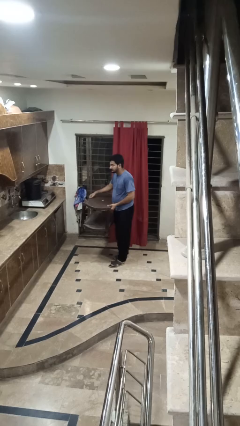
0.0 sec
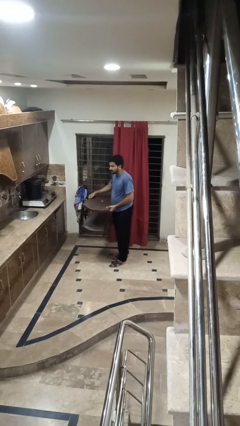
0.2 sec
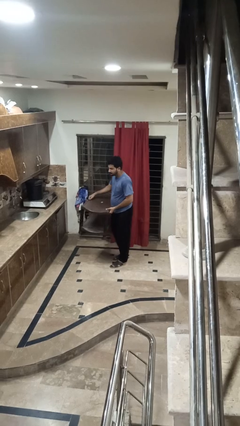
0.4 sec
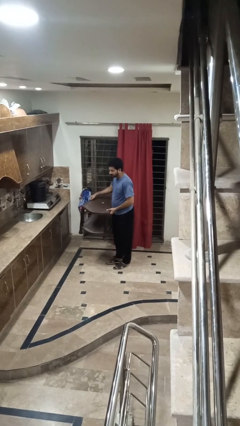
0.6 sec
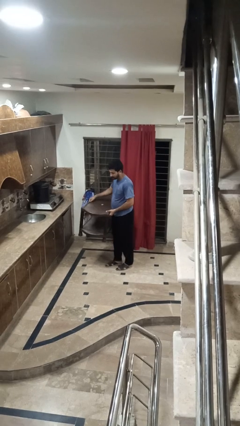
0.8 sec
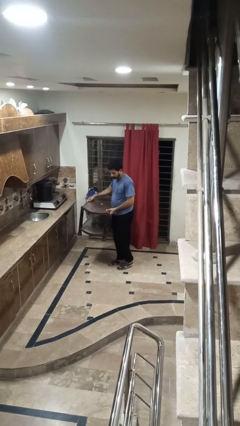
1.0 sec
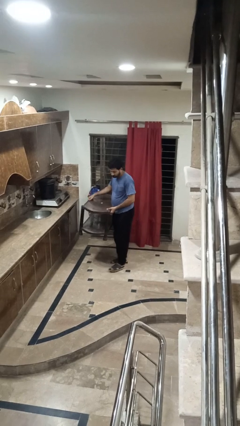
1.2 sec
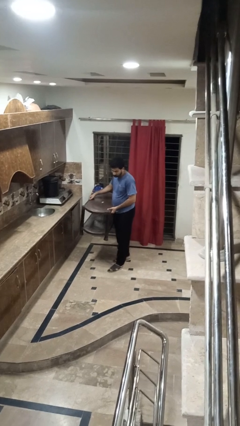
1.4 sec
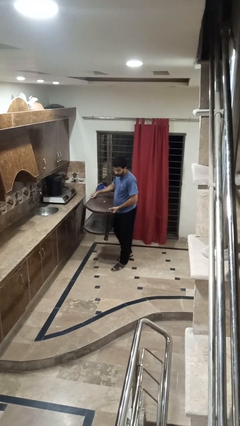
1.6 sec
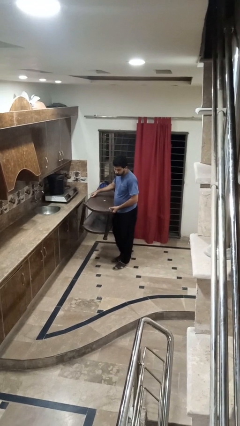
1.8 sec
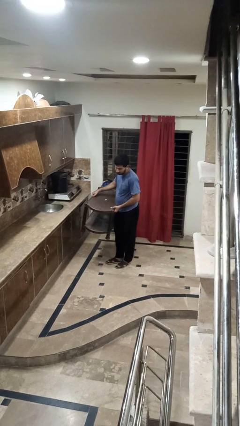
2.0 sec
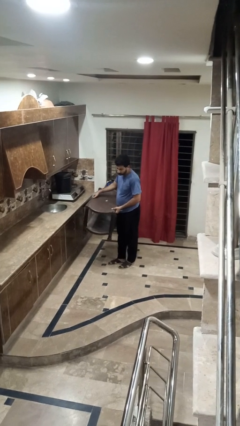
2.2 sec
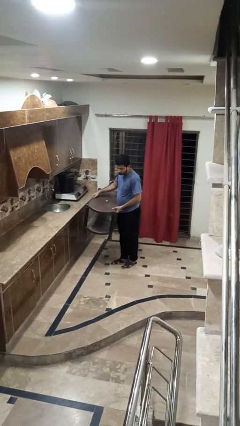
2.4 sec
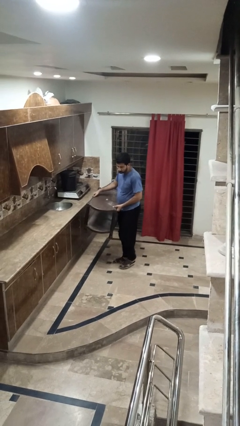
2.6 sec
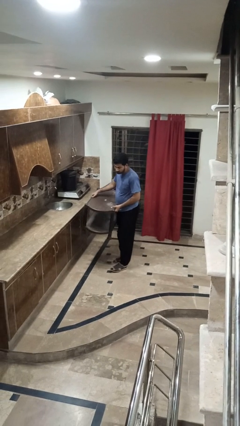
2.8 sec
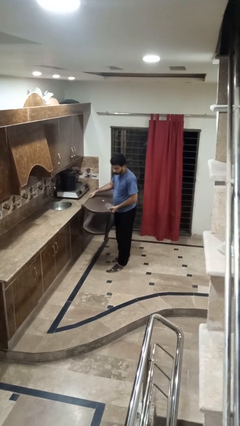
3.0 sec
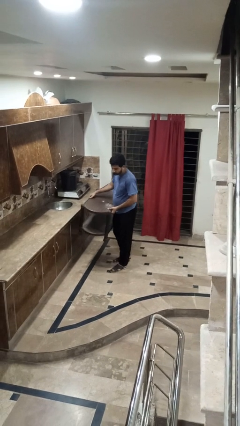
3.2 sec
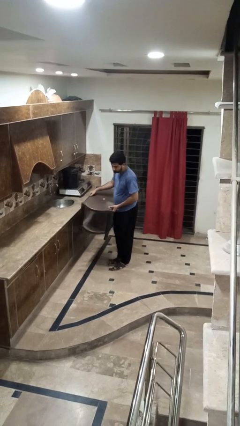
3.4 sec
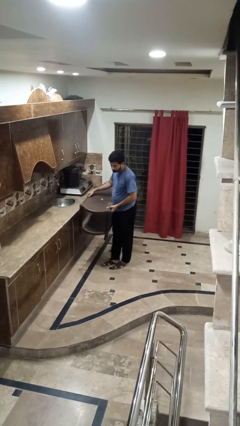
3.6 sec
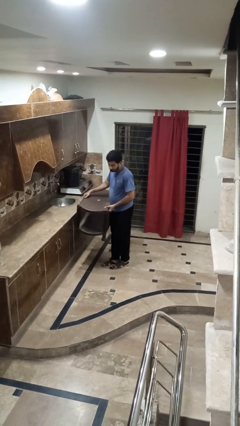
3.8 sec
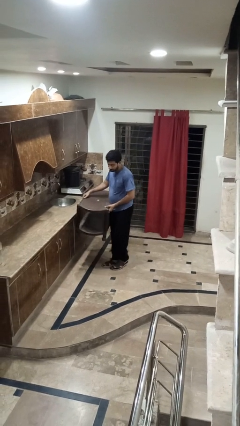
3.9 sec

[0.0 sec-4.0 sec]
person carries furniture

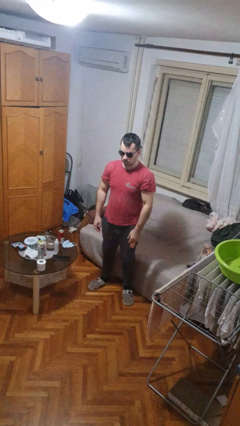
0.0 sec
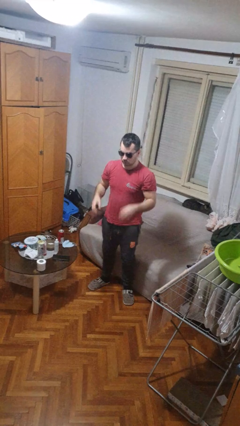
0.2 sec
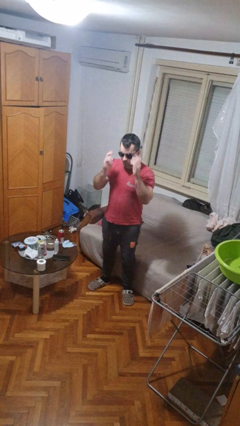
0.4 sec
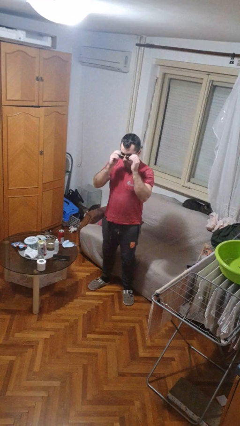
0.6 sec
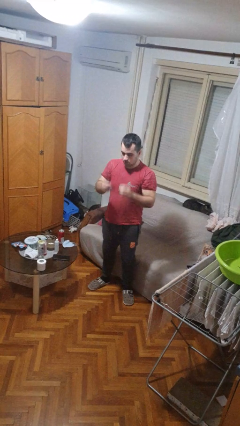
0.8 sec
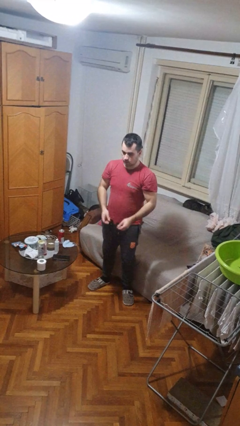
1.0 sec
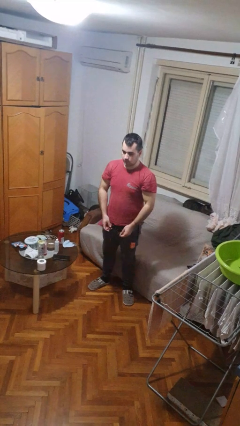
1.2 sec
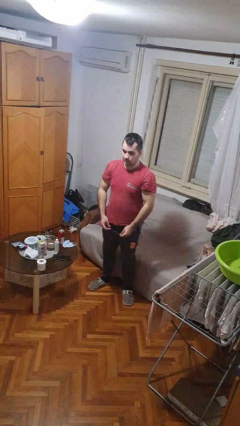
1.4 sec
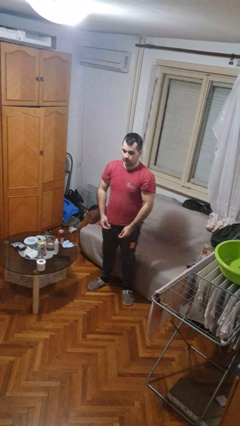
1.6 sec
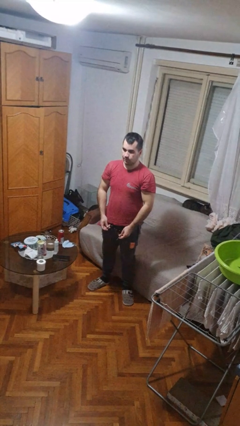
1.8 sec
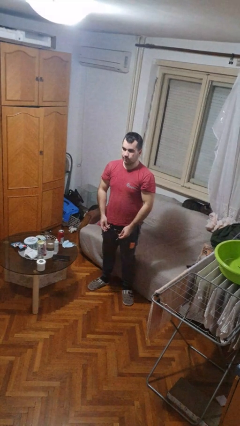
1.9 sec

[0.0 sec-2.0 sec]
person takes off sunglasses

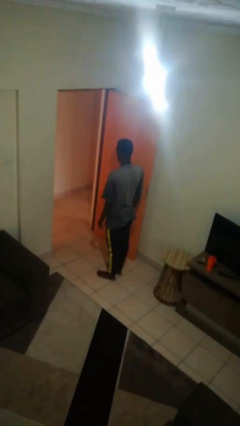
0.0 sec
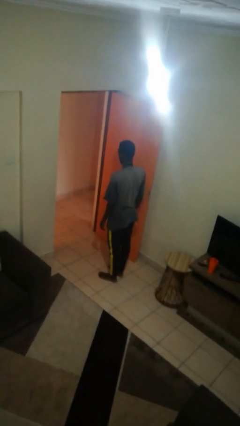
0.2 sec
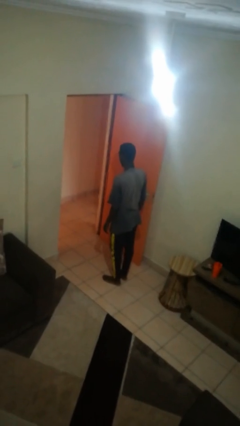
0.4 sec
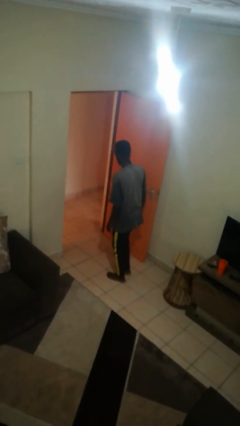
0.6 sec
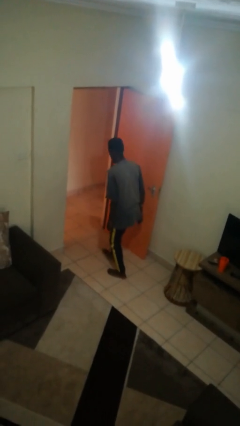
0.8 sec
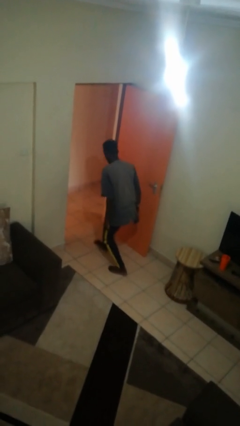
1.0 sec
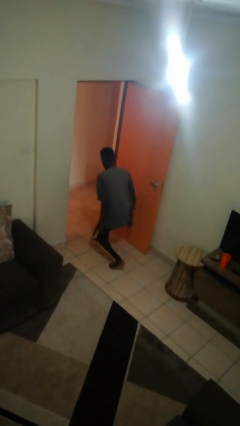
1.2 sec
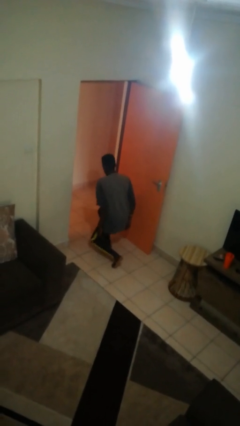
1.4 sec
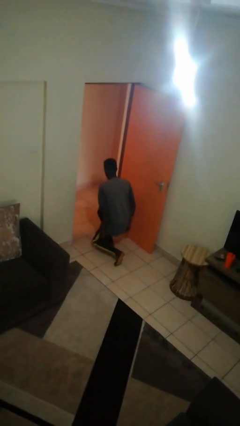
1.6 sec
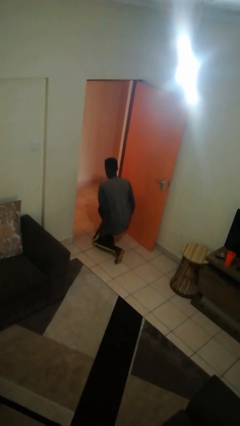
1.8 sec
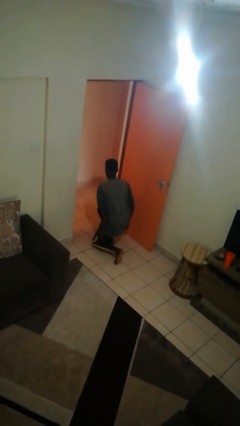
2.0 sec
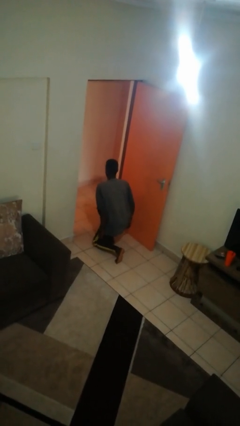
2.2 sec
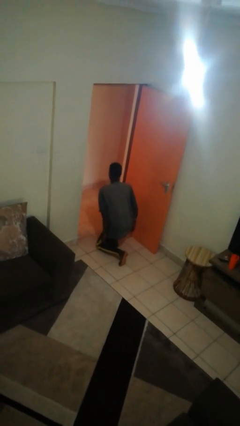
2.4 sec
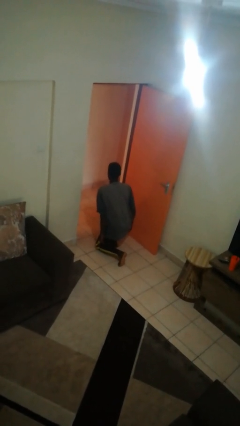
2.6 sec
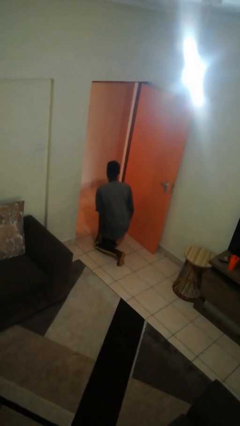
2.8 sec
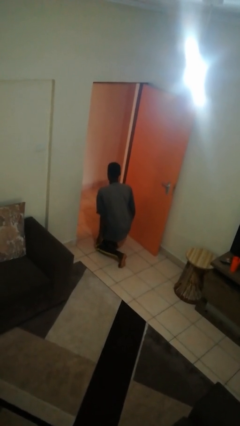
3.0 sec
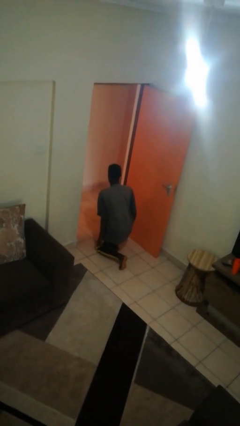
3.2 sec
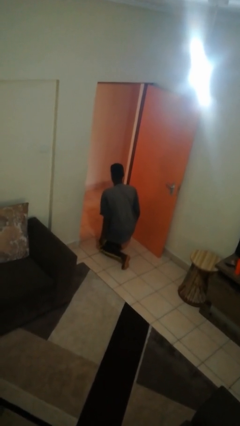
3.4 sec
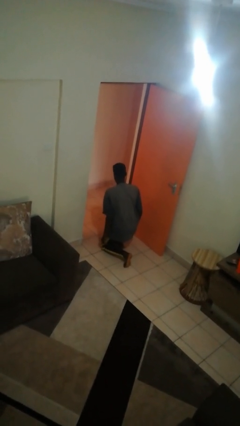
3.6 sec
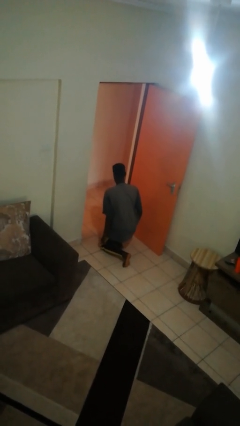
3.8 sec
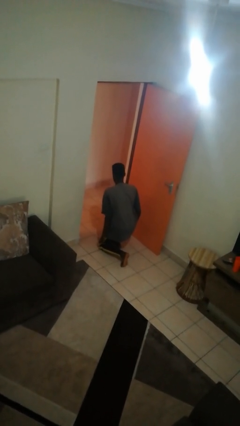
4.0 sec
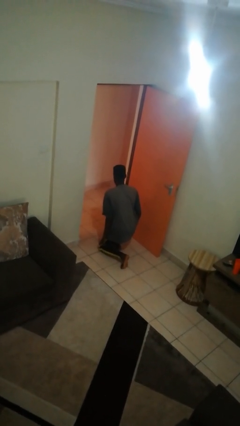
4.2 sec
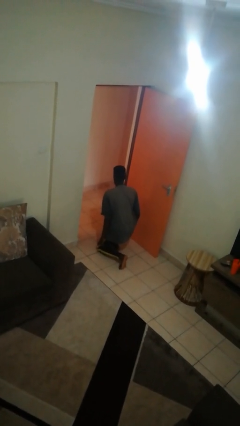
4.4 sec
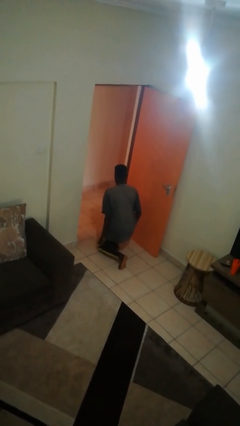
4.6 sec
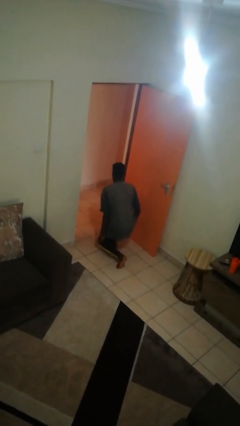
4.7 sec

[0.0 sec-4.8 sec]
person kneels

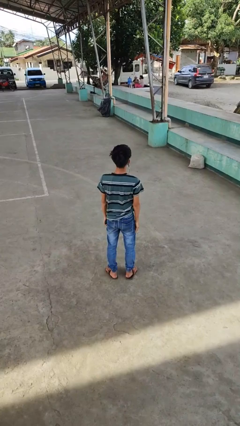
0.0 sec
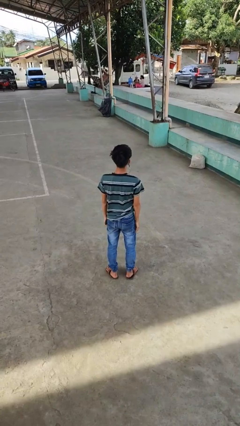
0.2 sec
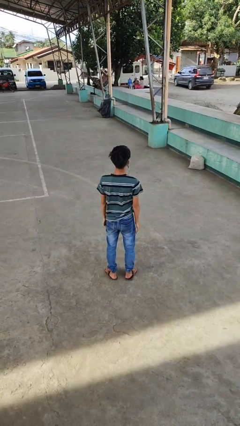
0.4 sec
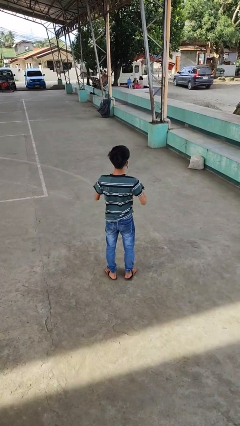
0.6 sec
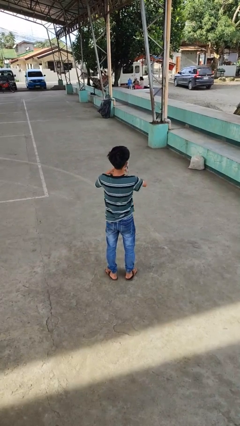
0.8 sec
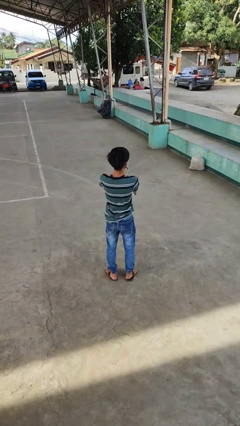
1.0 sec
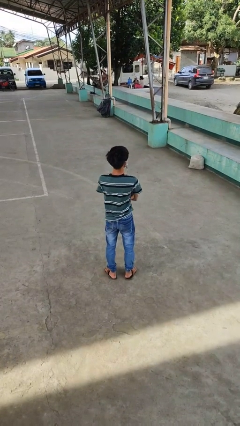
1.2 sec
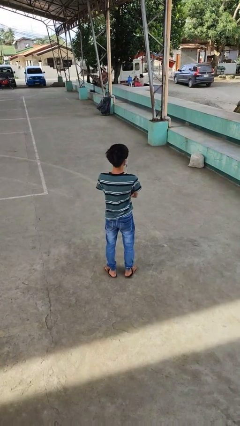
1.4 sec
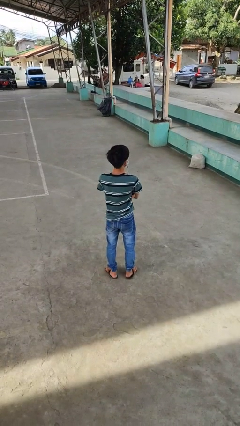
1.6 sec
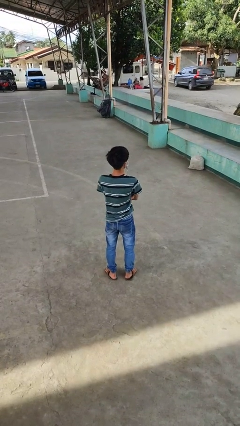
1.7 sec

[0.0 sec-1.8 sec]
person crosses arms

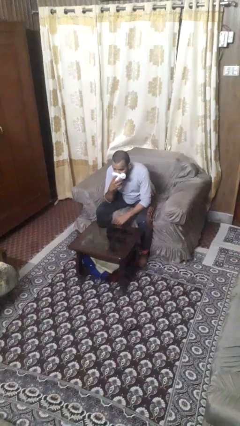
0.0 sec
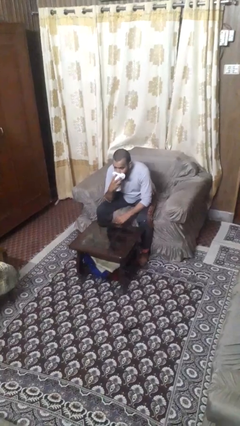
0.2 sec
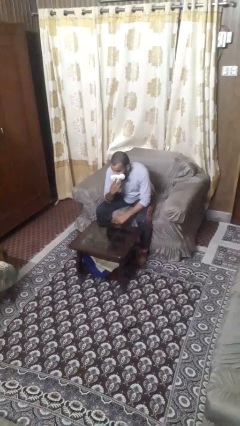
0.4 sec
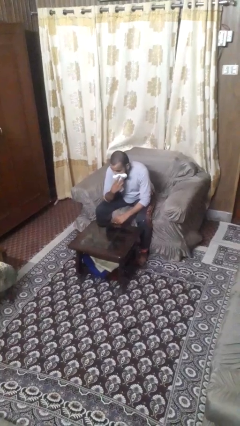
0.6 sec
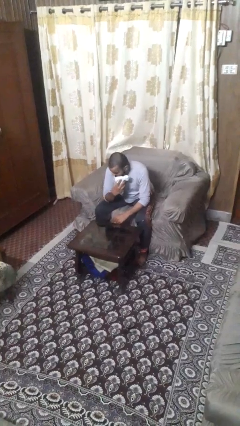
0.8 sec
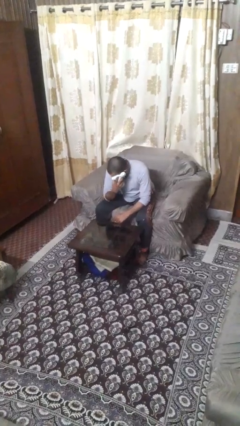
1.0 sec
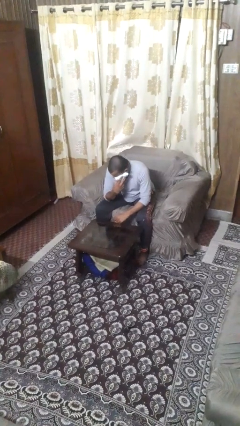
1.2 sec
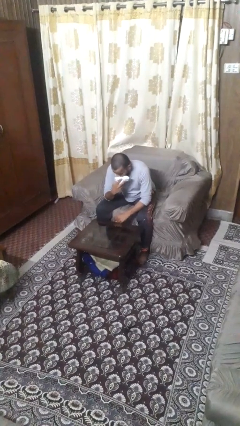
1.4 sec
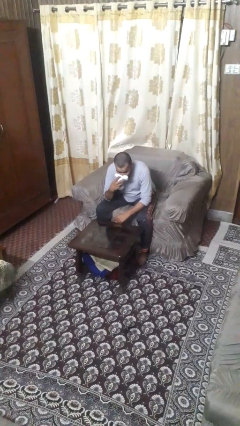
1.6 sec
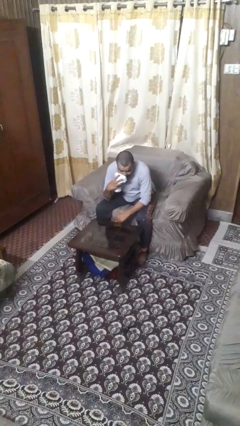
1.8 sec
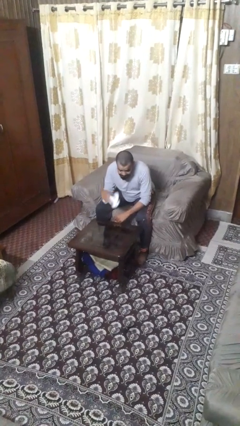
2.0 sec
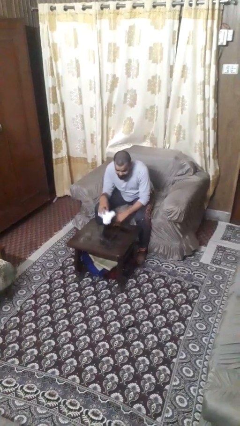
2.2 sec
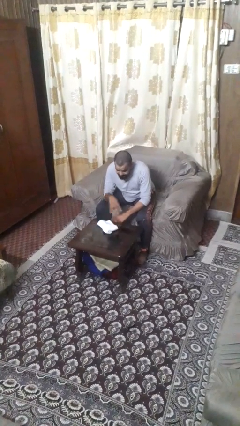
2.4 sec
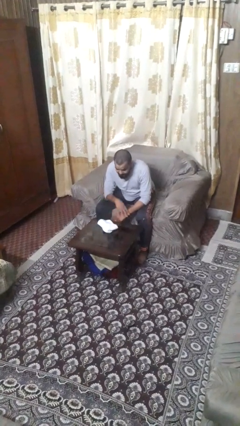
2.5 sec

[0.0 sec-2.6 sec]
person wipes mouth with napkin

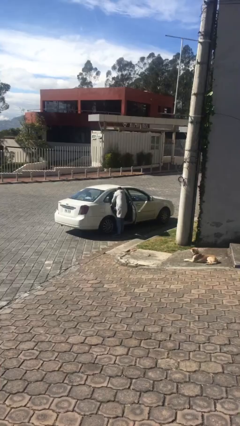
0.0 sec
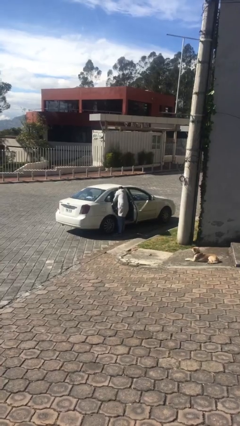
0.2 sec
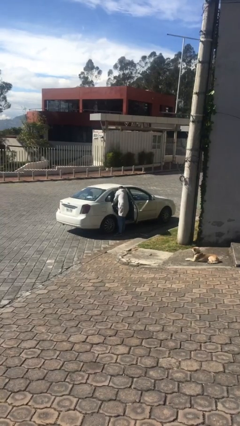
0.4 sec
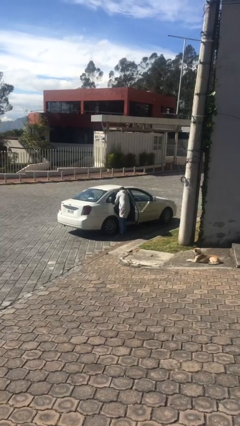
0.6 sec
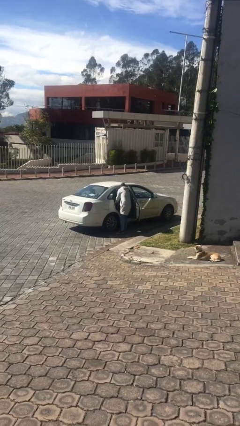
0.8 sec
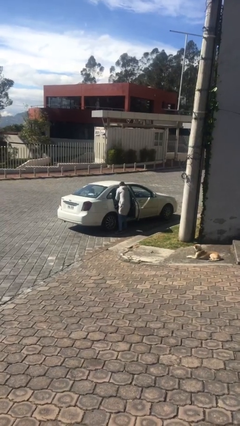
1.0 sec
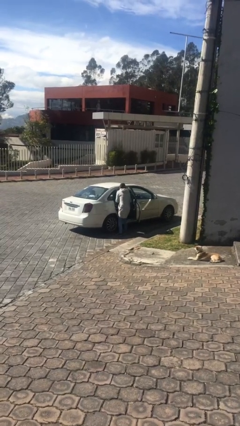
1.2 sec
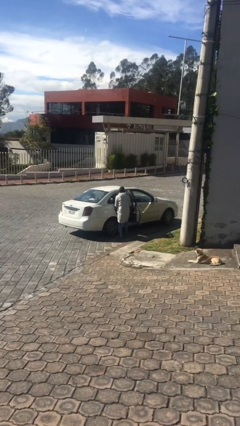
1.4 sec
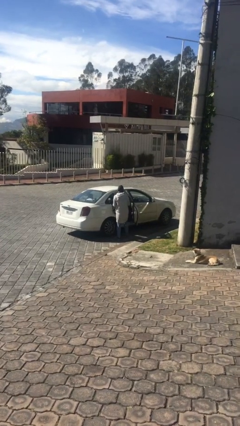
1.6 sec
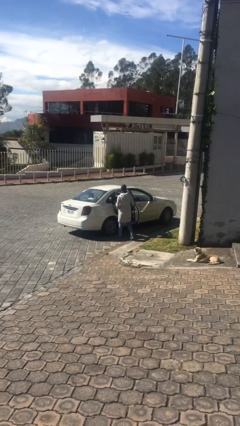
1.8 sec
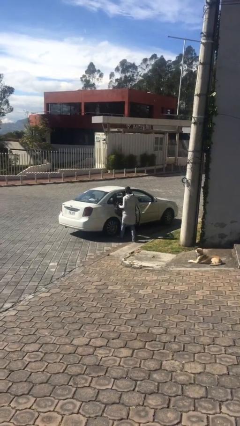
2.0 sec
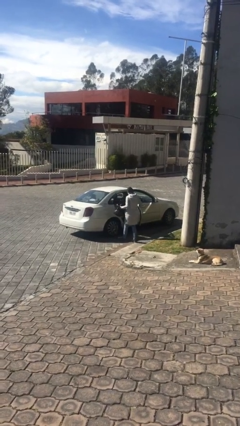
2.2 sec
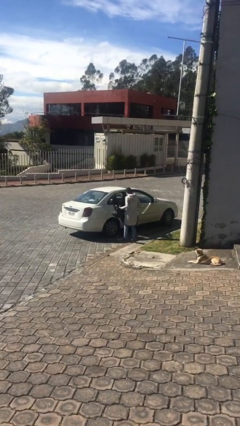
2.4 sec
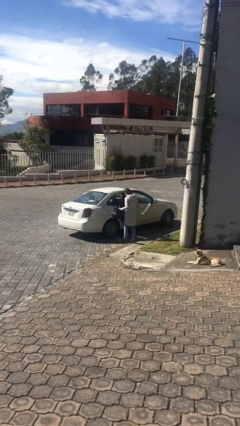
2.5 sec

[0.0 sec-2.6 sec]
person unloads car
